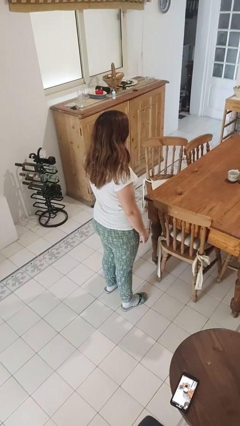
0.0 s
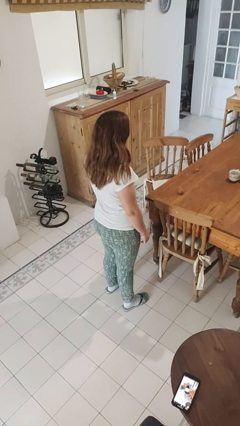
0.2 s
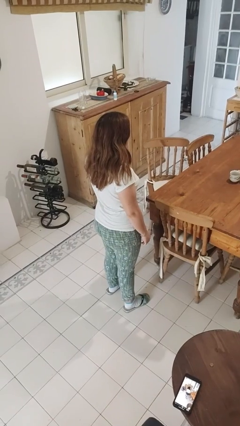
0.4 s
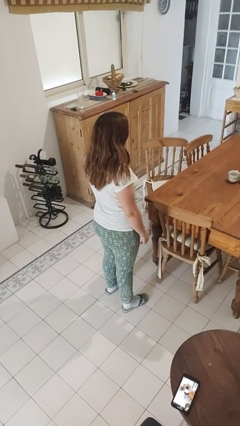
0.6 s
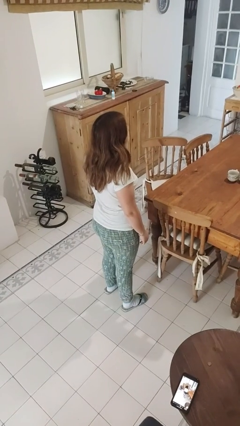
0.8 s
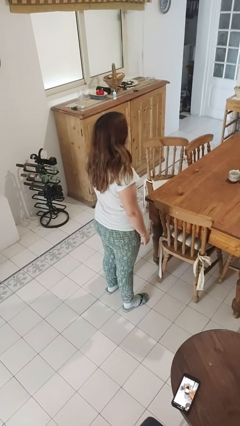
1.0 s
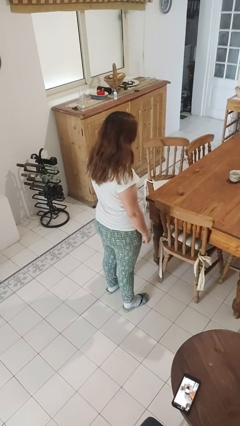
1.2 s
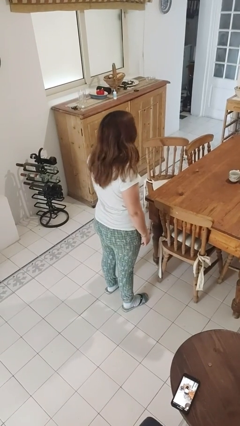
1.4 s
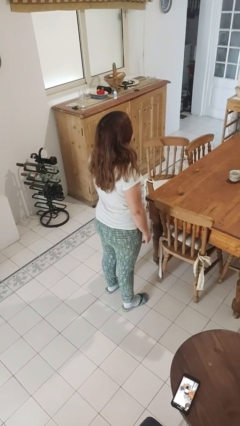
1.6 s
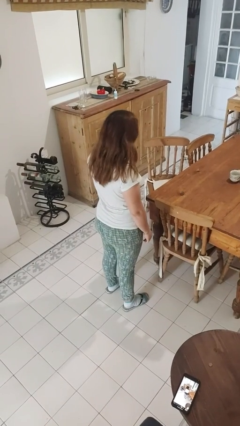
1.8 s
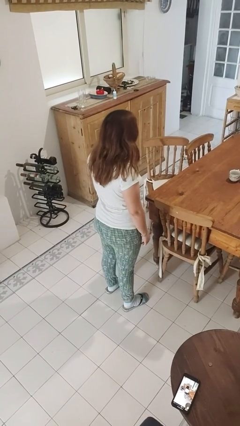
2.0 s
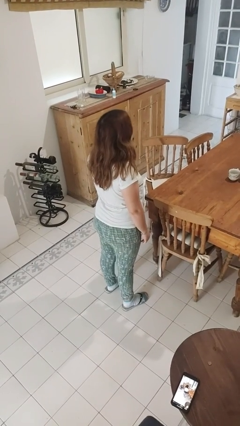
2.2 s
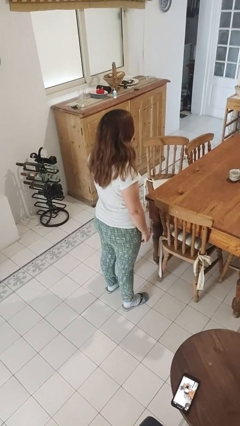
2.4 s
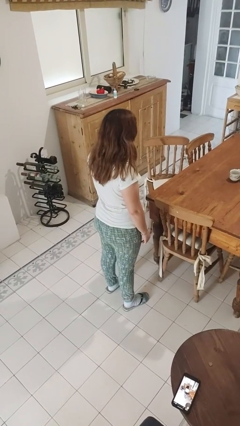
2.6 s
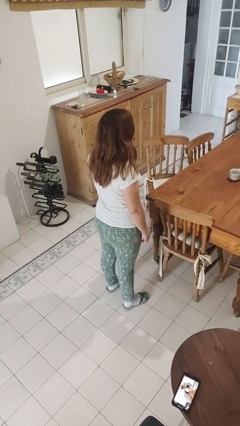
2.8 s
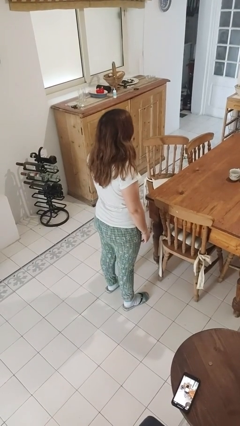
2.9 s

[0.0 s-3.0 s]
person nods head

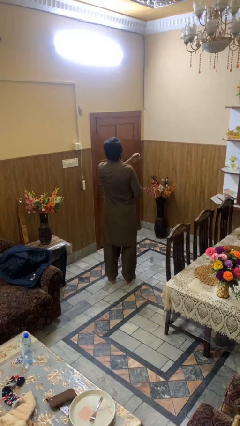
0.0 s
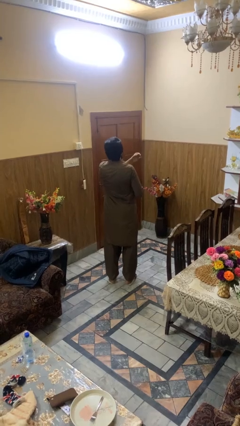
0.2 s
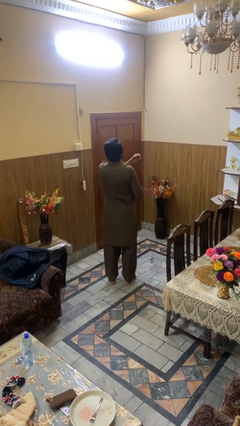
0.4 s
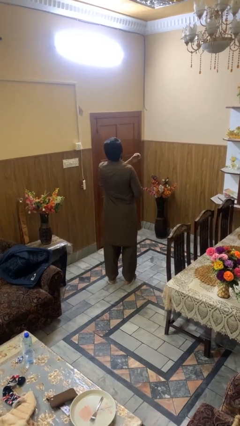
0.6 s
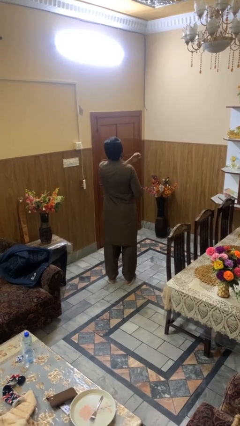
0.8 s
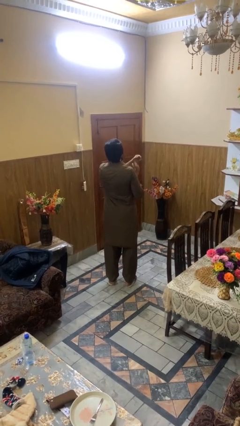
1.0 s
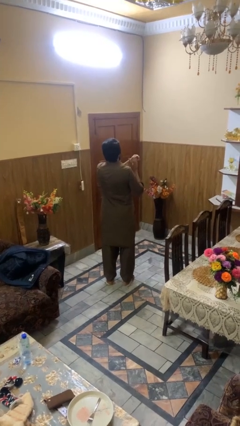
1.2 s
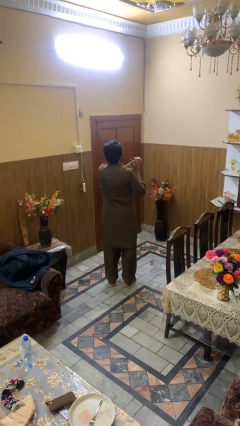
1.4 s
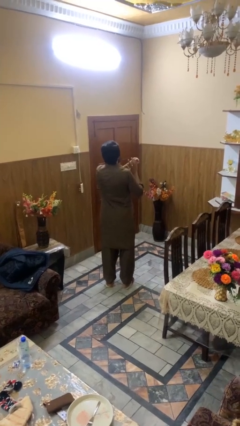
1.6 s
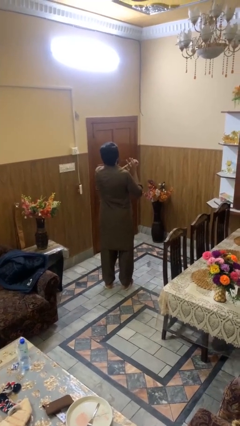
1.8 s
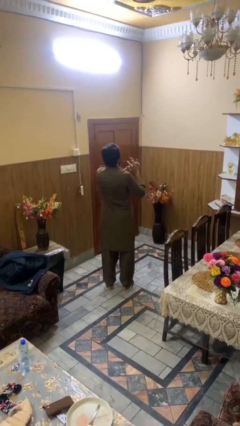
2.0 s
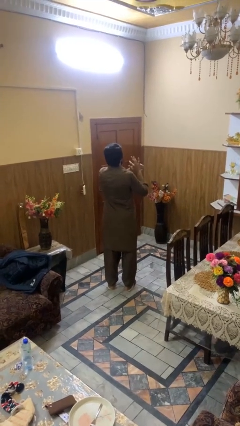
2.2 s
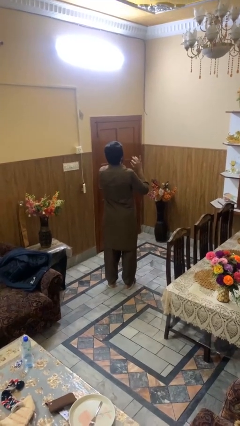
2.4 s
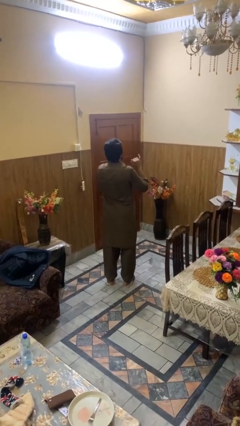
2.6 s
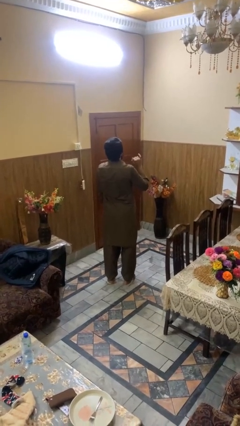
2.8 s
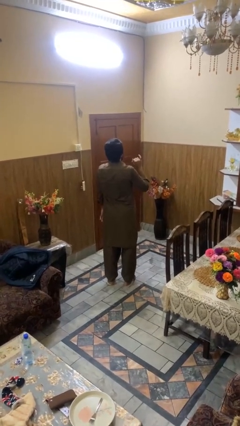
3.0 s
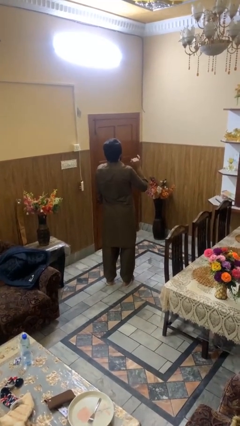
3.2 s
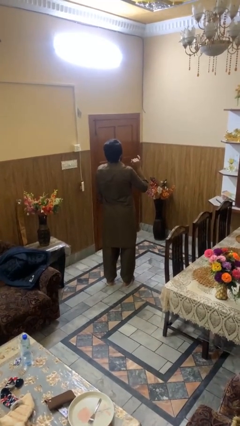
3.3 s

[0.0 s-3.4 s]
person puts on ring

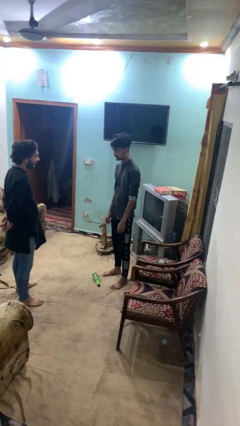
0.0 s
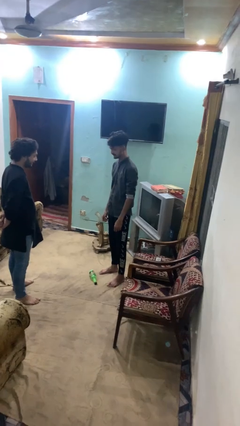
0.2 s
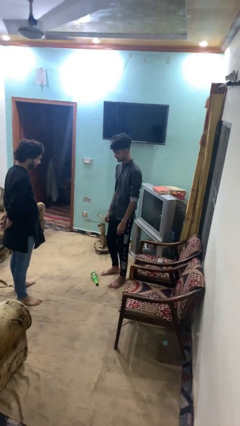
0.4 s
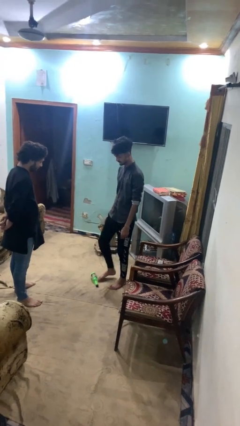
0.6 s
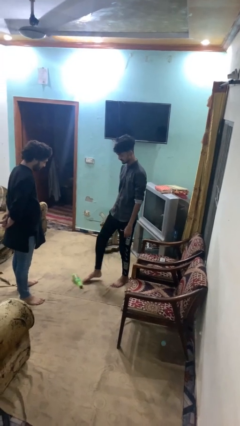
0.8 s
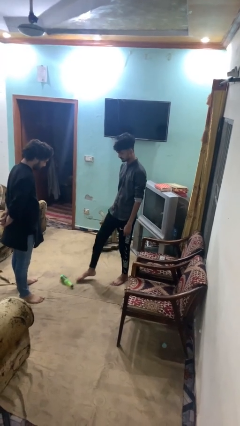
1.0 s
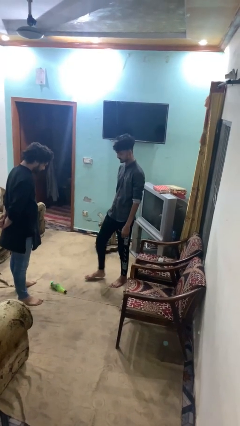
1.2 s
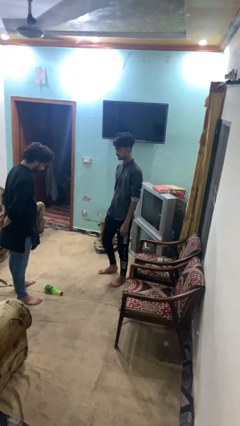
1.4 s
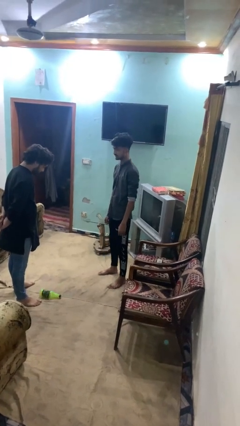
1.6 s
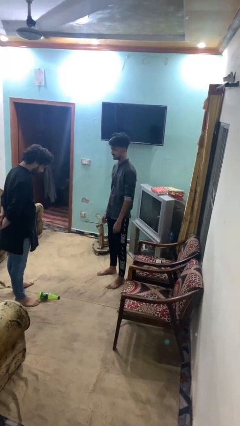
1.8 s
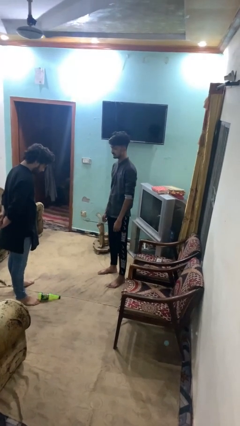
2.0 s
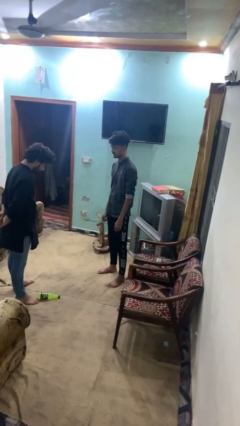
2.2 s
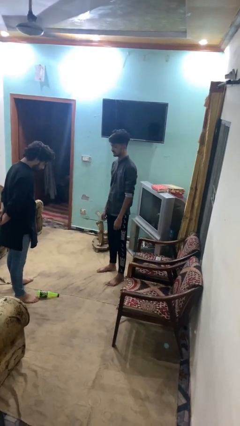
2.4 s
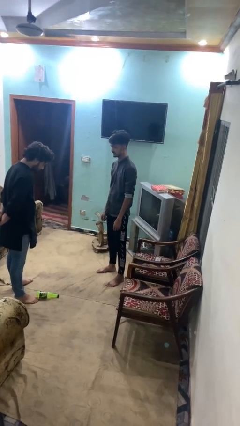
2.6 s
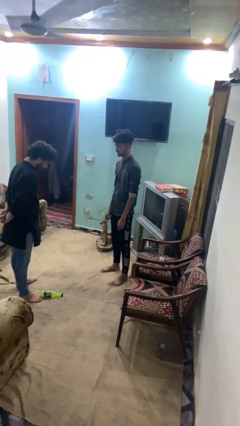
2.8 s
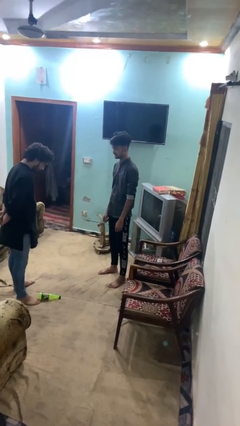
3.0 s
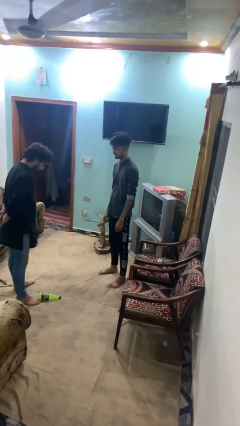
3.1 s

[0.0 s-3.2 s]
person kicks object to person

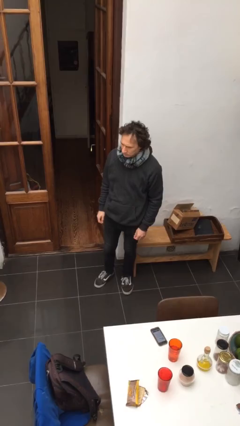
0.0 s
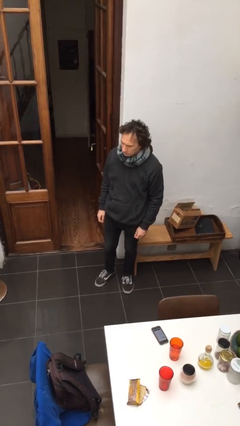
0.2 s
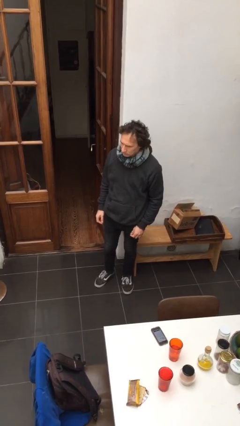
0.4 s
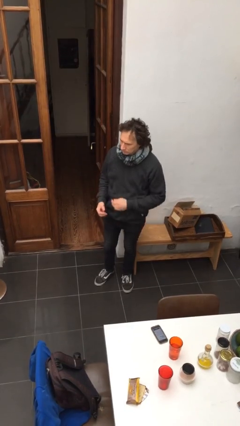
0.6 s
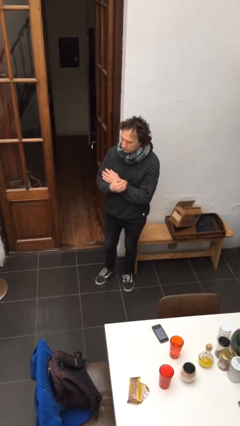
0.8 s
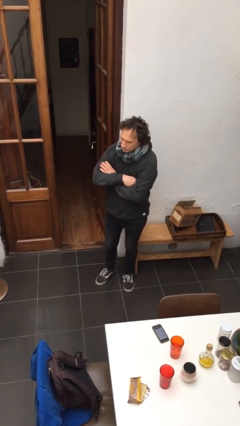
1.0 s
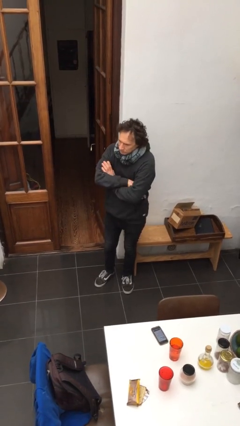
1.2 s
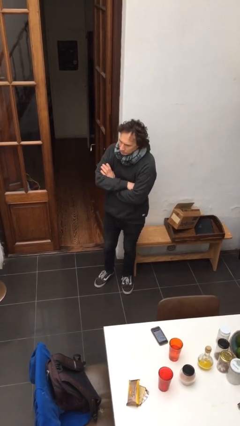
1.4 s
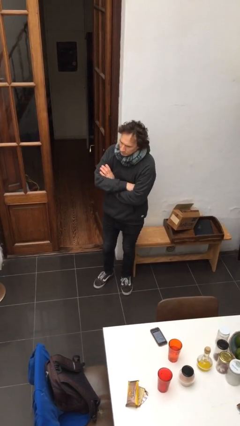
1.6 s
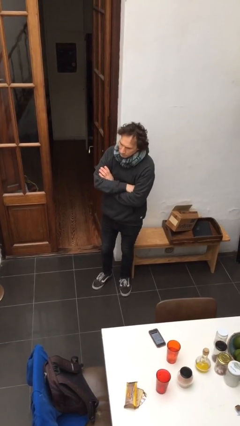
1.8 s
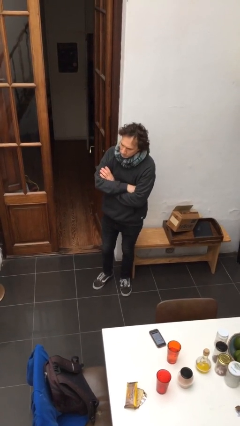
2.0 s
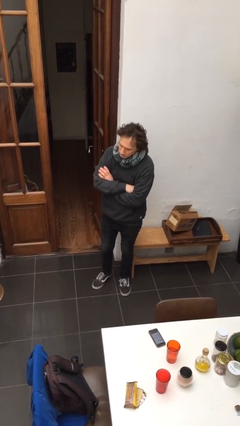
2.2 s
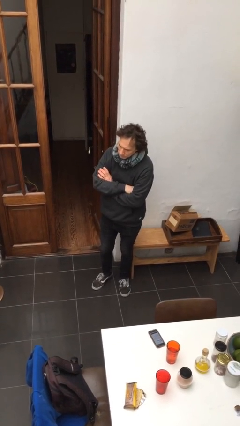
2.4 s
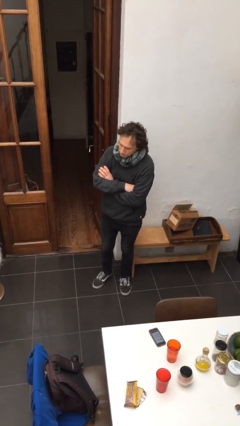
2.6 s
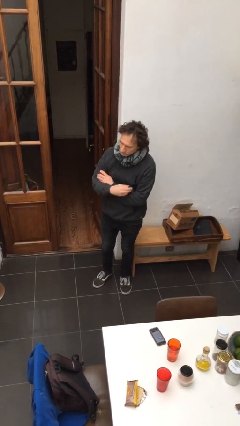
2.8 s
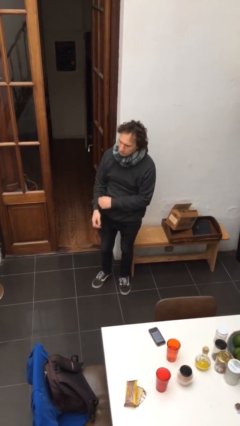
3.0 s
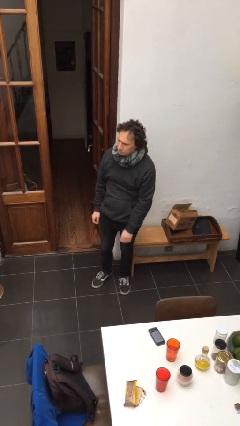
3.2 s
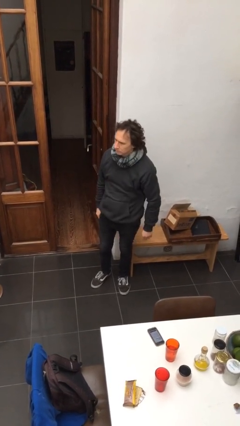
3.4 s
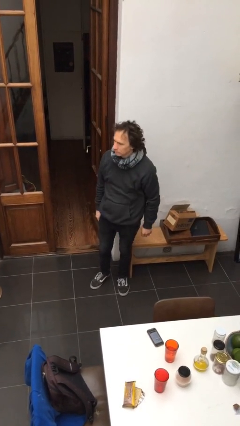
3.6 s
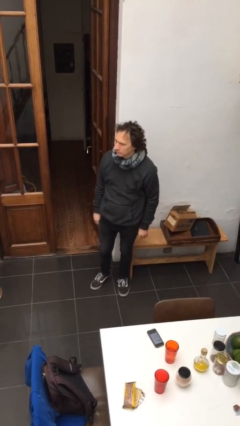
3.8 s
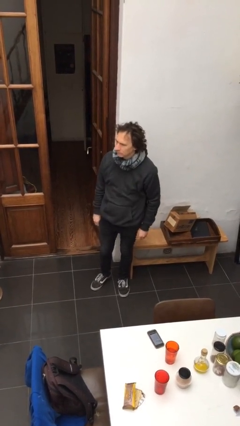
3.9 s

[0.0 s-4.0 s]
person crosses arms

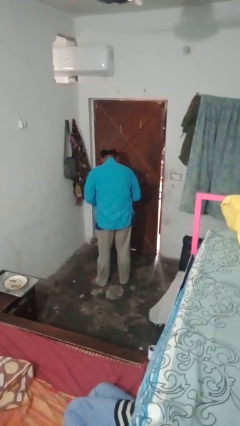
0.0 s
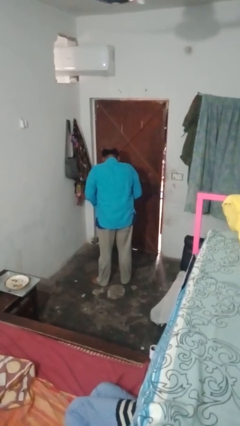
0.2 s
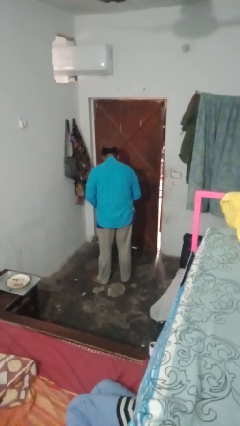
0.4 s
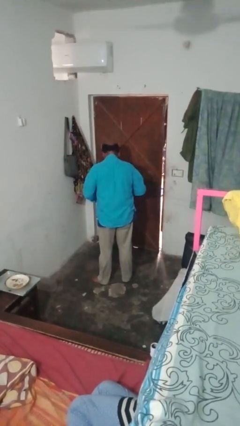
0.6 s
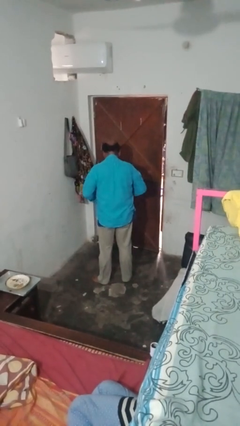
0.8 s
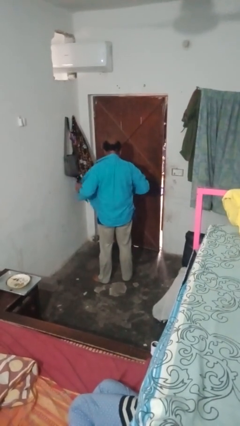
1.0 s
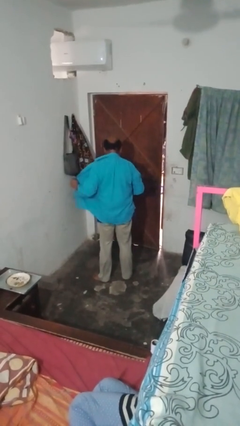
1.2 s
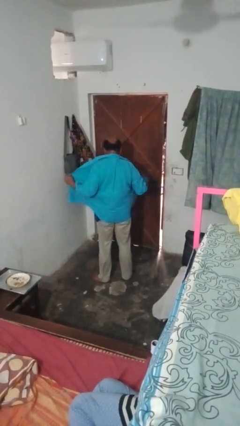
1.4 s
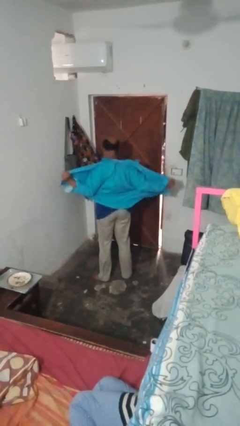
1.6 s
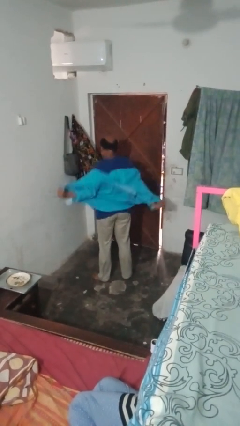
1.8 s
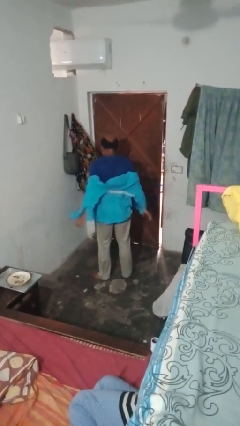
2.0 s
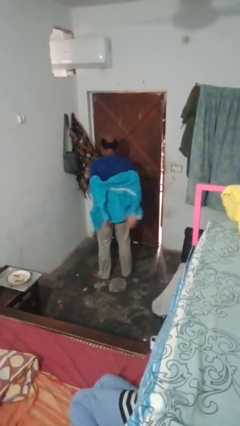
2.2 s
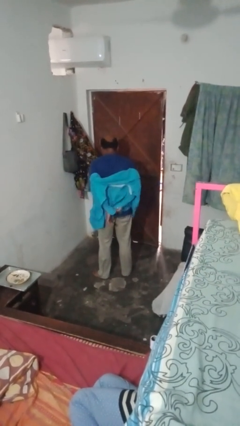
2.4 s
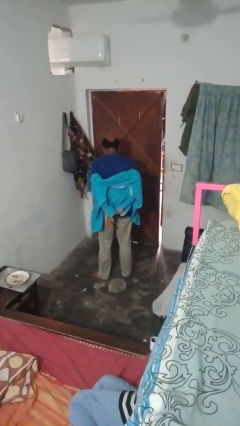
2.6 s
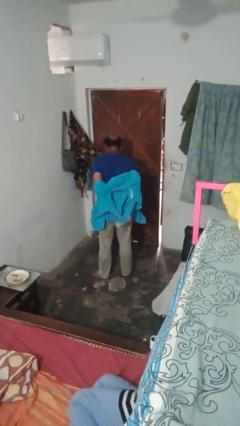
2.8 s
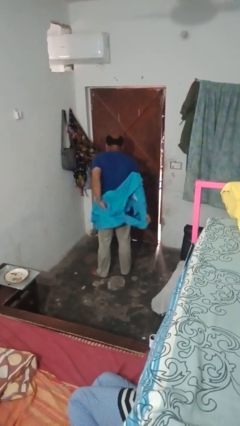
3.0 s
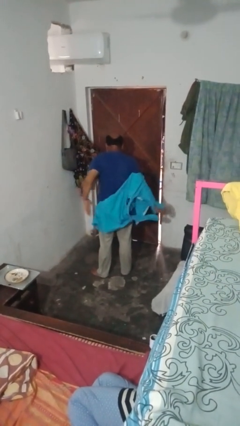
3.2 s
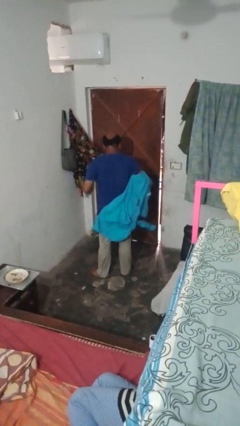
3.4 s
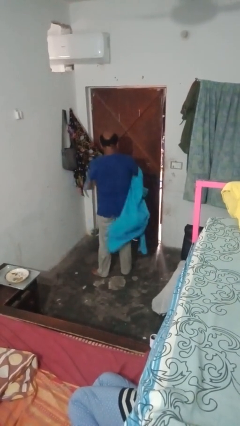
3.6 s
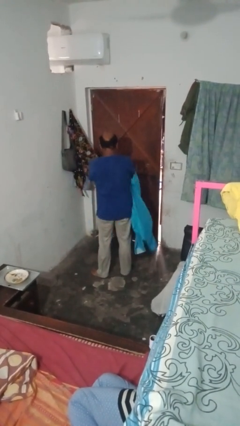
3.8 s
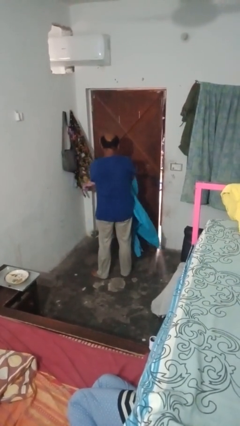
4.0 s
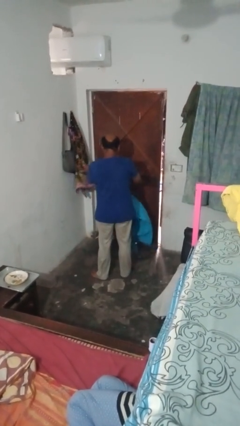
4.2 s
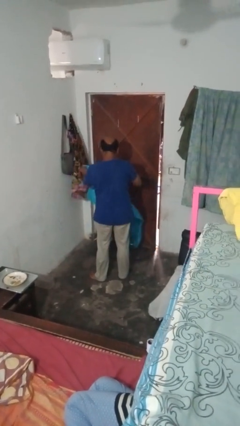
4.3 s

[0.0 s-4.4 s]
person takes off shirt
